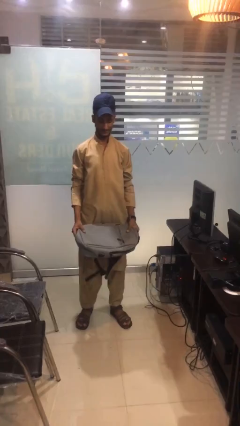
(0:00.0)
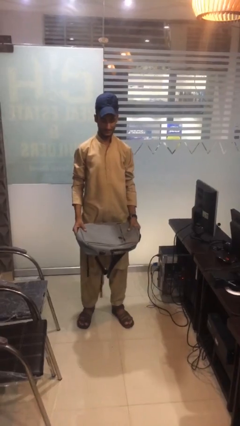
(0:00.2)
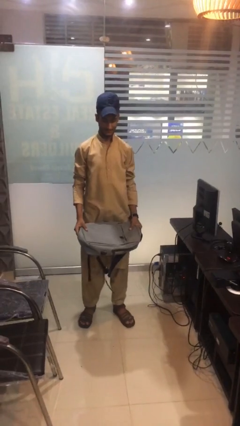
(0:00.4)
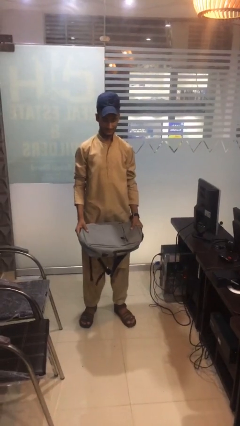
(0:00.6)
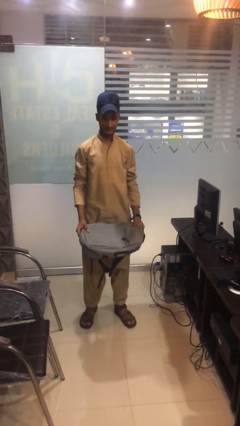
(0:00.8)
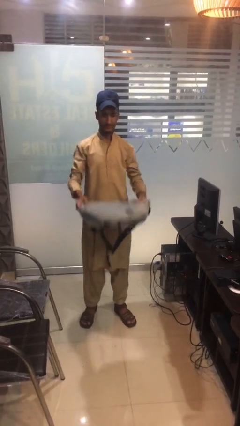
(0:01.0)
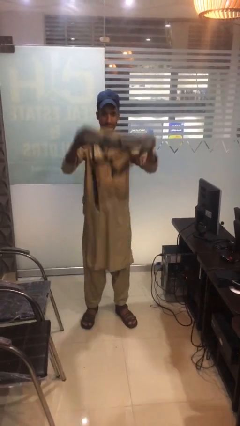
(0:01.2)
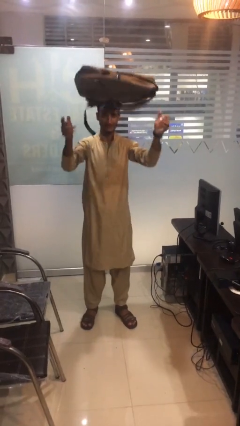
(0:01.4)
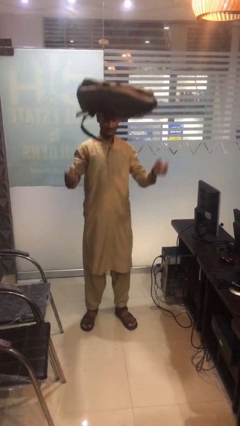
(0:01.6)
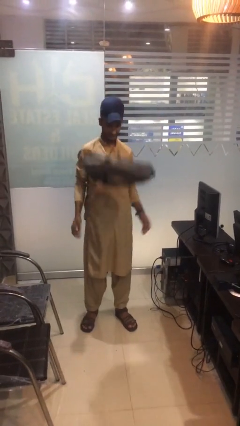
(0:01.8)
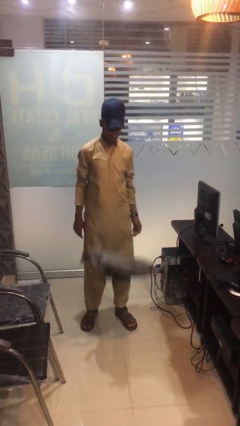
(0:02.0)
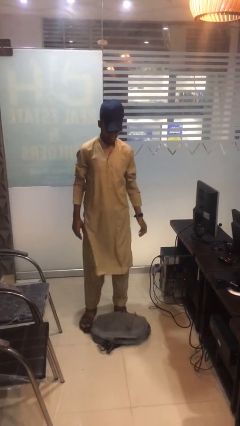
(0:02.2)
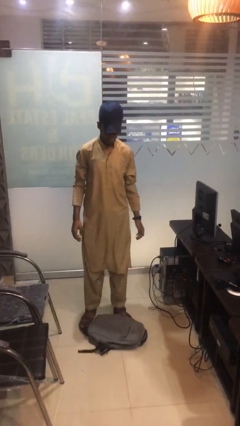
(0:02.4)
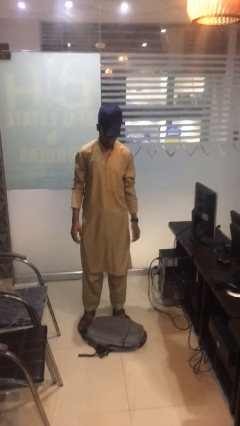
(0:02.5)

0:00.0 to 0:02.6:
person throws object into air

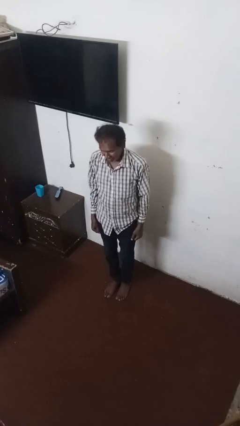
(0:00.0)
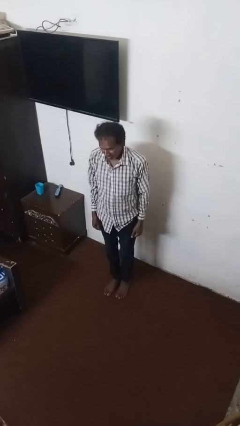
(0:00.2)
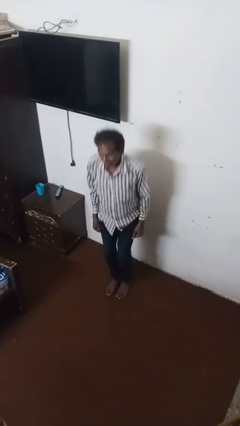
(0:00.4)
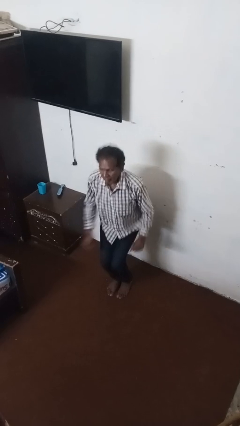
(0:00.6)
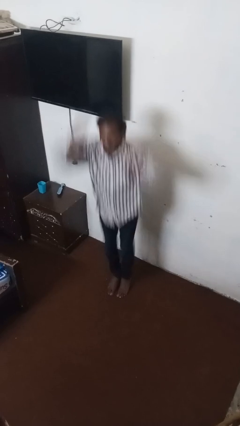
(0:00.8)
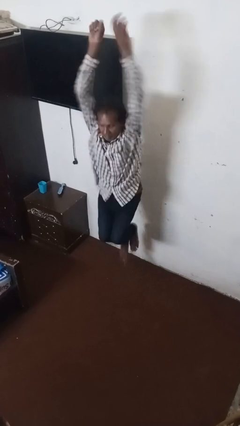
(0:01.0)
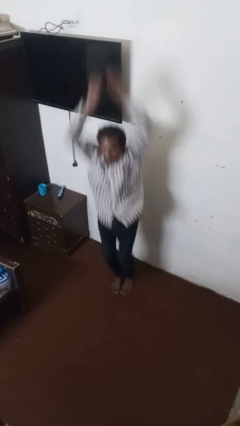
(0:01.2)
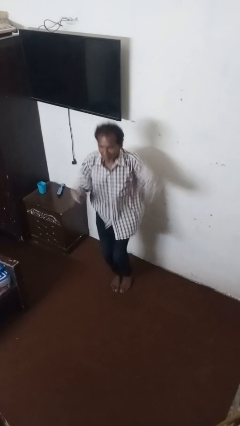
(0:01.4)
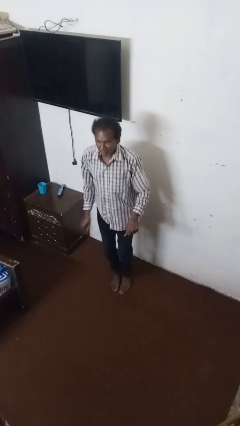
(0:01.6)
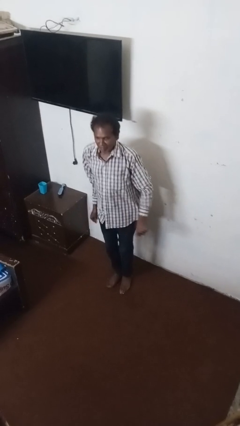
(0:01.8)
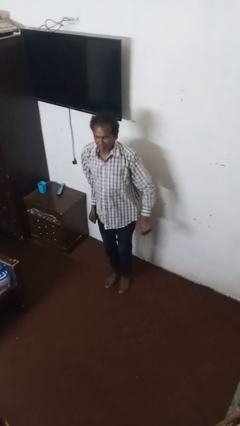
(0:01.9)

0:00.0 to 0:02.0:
person jumps

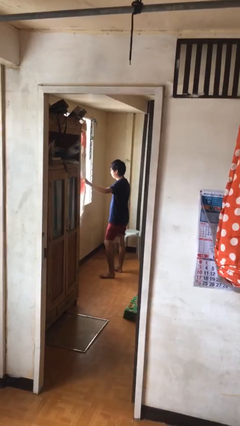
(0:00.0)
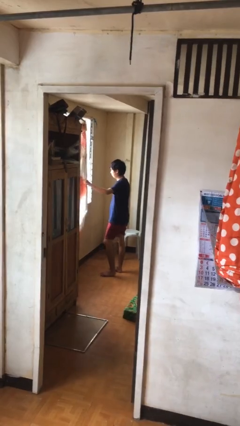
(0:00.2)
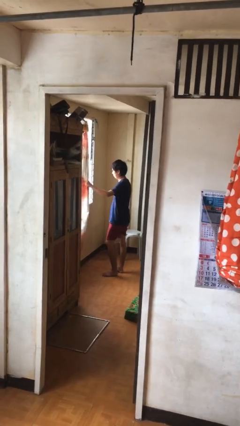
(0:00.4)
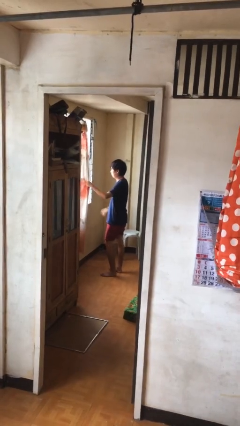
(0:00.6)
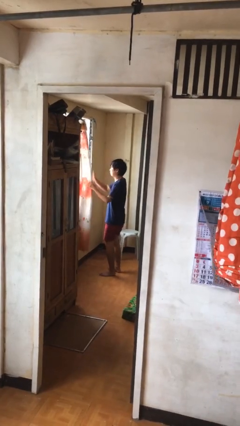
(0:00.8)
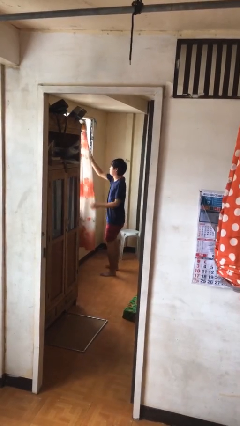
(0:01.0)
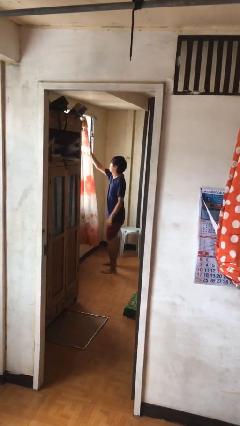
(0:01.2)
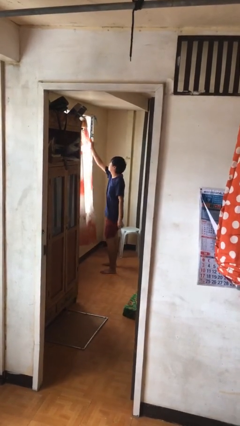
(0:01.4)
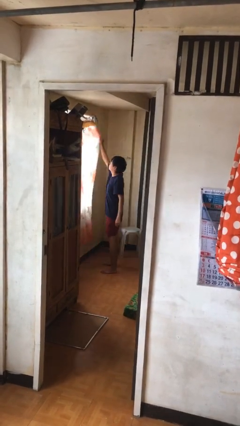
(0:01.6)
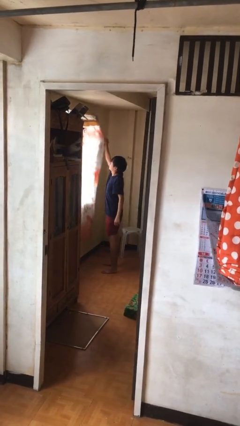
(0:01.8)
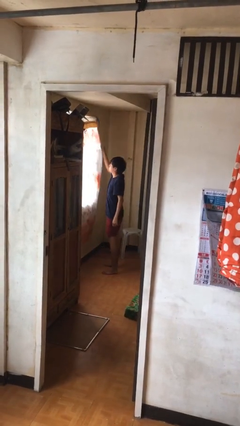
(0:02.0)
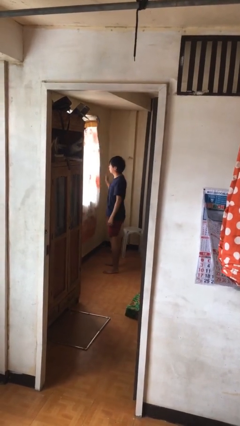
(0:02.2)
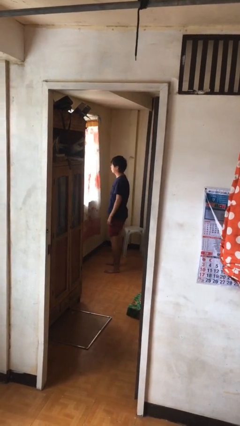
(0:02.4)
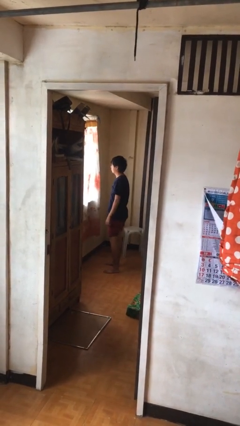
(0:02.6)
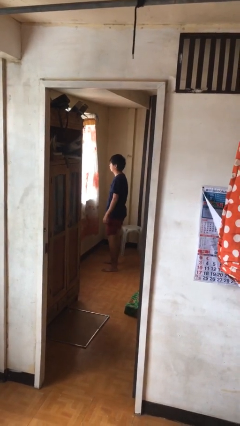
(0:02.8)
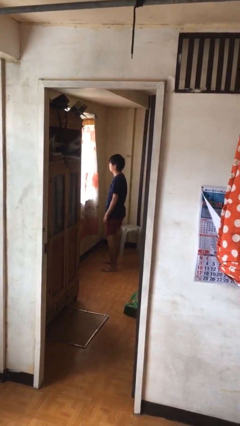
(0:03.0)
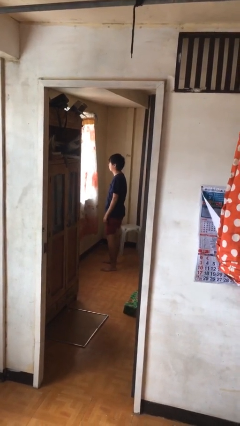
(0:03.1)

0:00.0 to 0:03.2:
person closes curtains

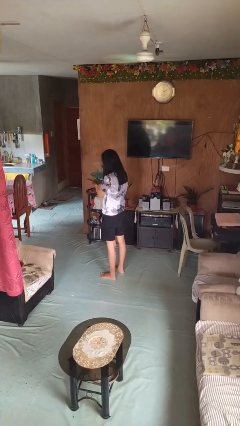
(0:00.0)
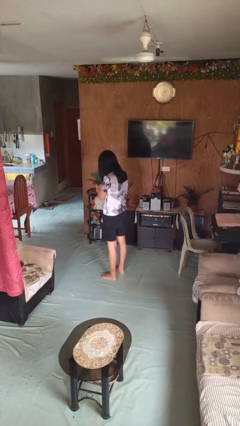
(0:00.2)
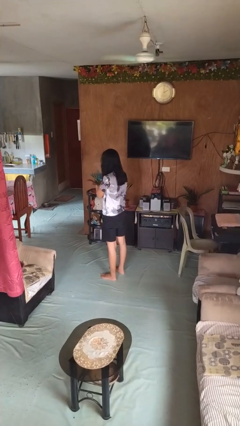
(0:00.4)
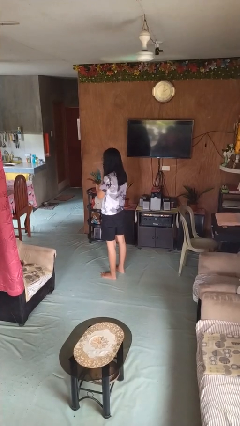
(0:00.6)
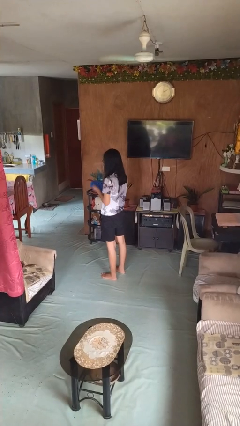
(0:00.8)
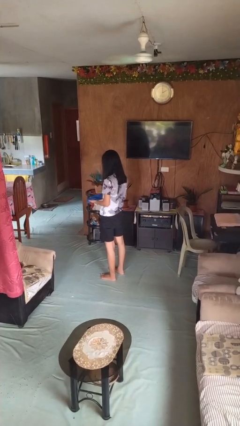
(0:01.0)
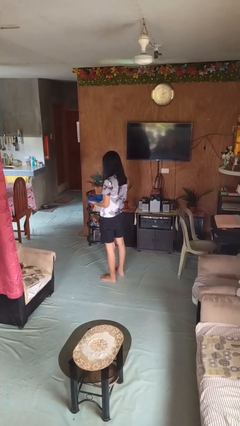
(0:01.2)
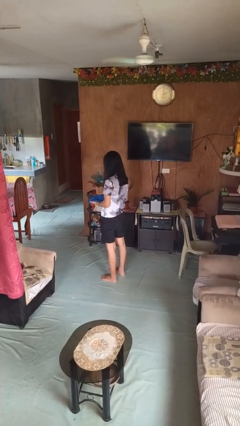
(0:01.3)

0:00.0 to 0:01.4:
person blows nose

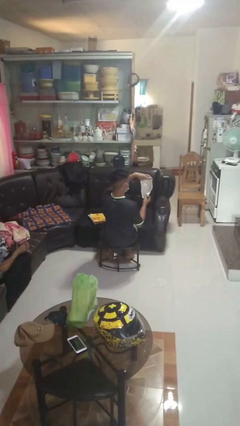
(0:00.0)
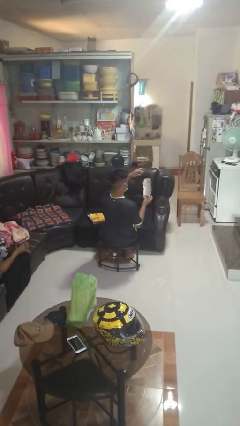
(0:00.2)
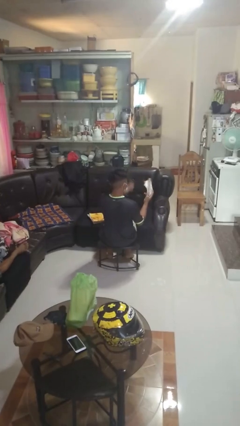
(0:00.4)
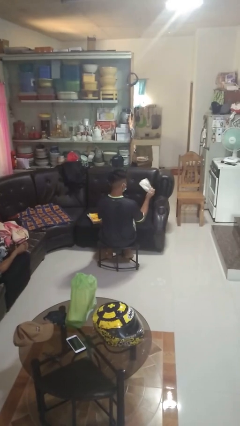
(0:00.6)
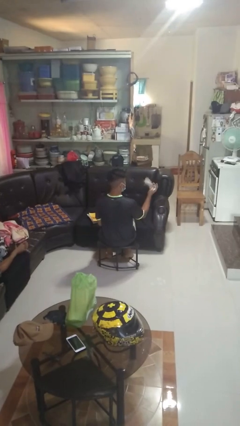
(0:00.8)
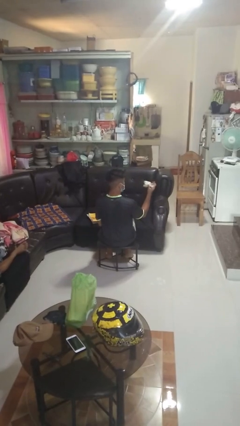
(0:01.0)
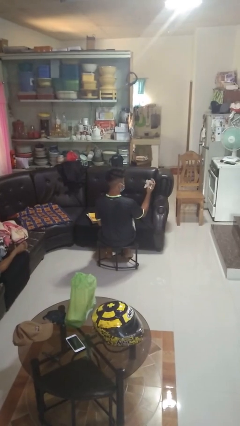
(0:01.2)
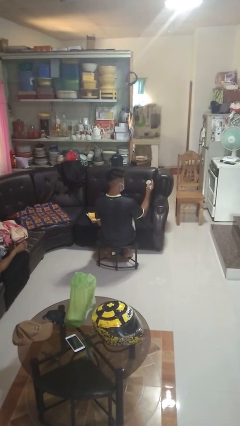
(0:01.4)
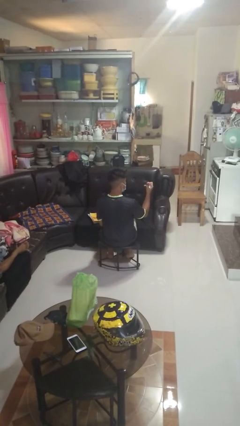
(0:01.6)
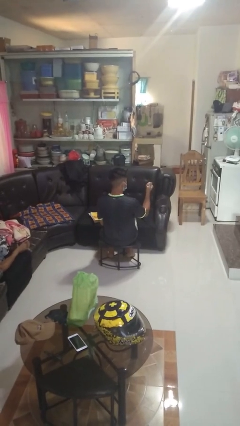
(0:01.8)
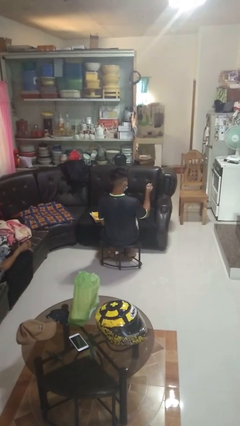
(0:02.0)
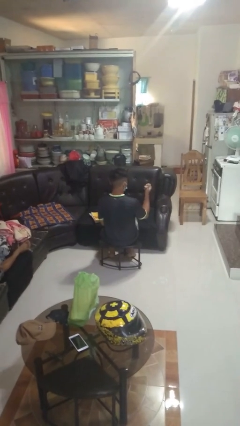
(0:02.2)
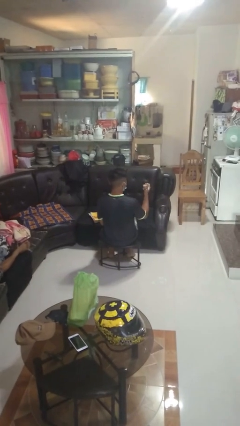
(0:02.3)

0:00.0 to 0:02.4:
person crumples paper

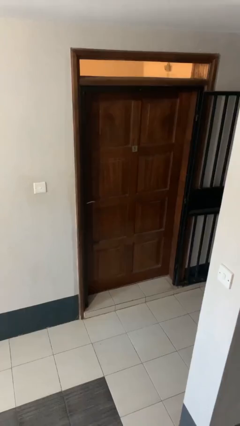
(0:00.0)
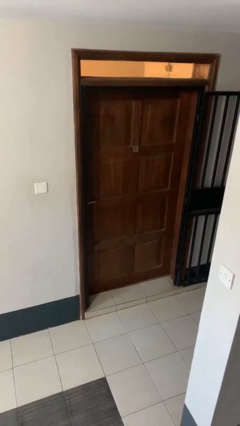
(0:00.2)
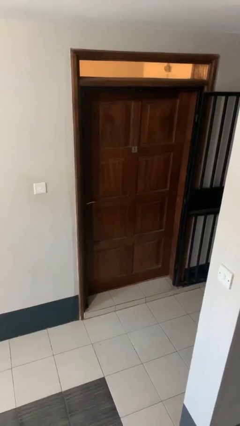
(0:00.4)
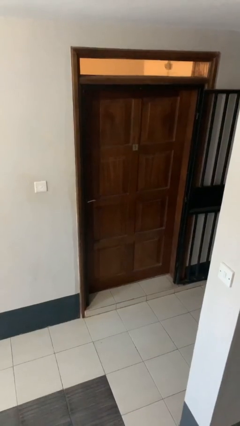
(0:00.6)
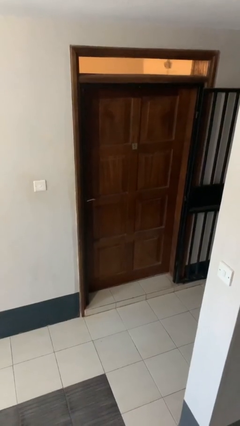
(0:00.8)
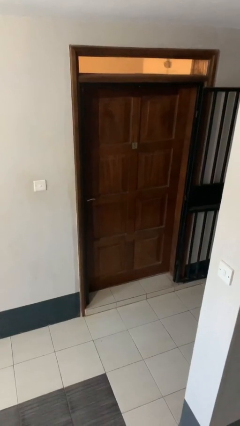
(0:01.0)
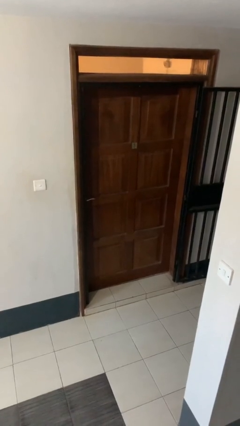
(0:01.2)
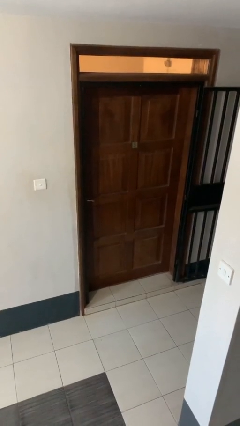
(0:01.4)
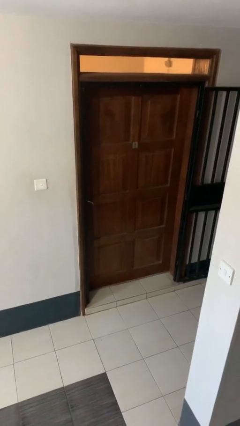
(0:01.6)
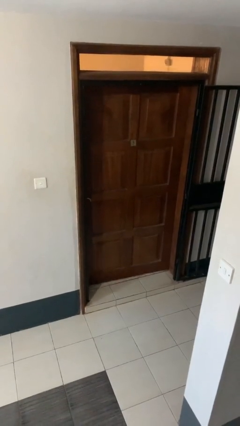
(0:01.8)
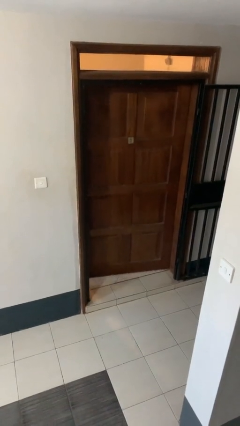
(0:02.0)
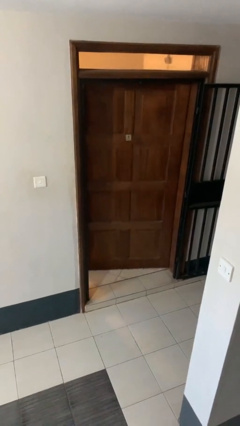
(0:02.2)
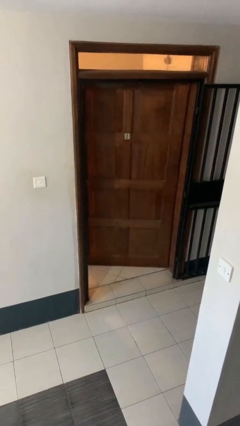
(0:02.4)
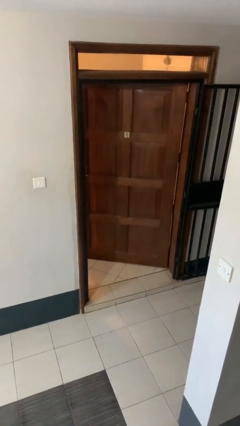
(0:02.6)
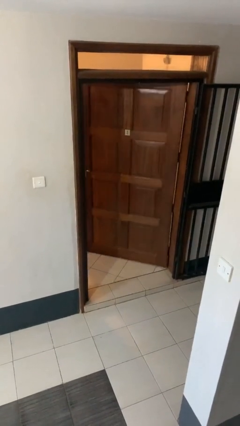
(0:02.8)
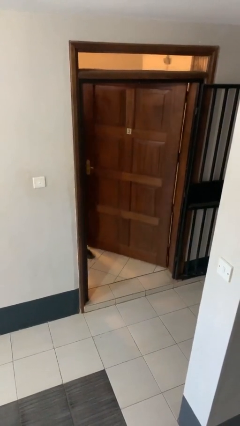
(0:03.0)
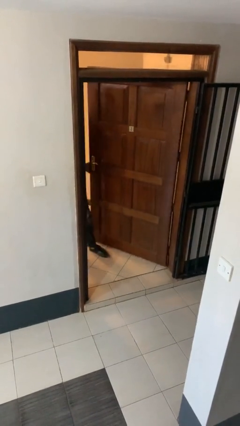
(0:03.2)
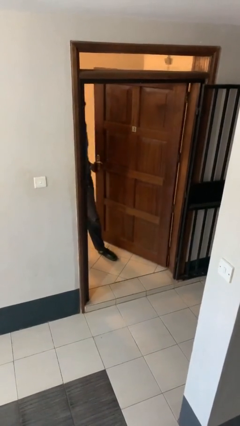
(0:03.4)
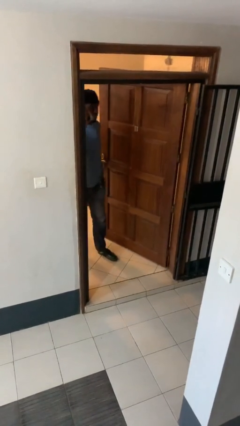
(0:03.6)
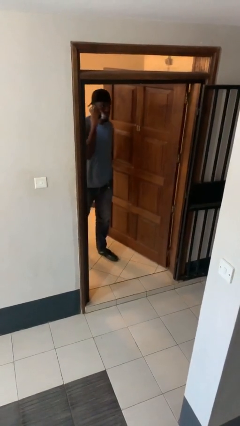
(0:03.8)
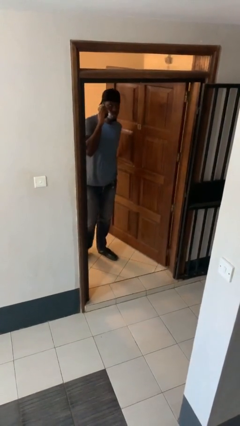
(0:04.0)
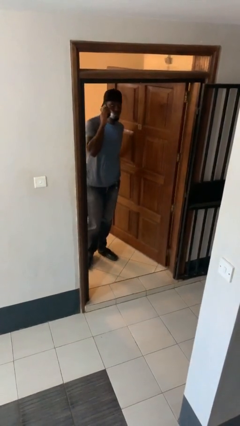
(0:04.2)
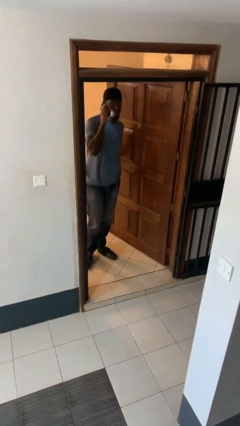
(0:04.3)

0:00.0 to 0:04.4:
person opens facility door

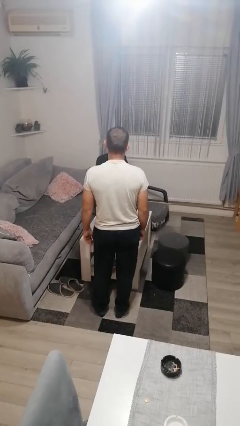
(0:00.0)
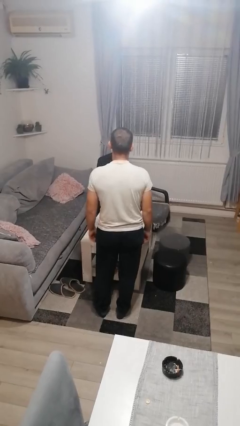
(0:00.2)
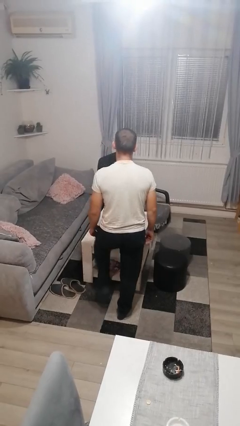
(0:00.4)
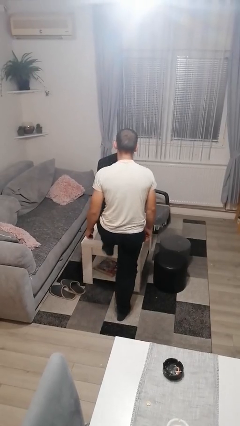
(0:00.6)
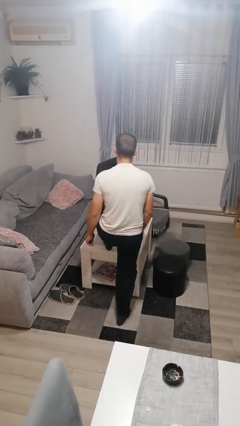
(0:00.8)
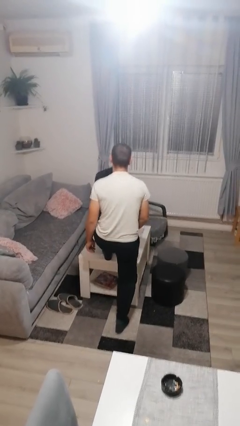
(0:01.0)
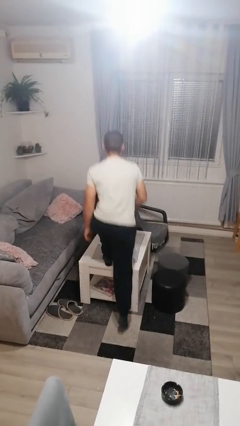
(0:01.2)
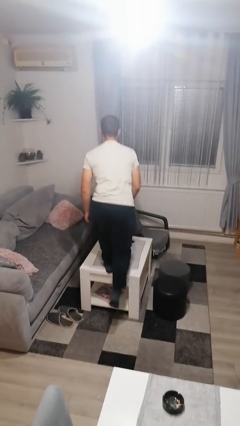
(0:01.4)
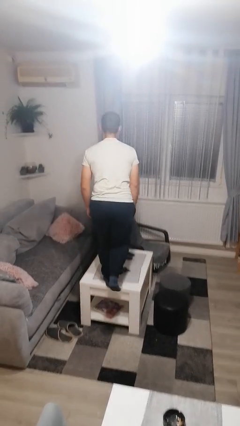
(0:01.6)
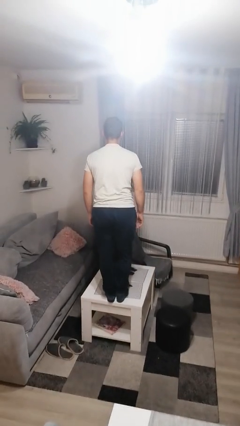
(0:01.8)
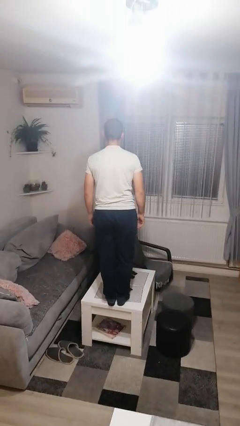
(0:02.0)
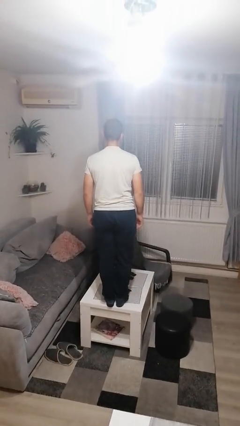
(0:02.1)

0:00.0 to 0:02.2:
person climbs on table
